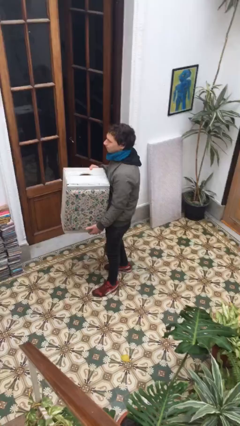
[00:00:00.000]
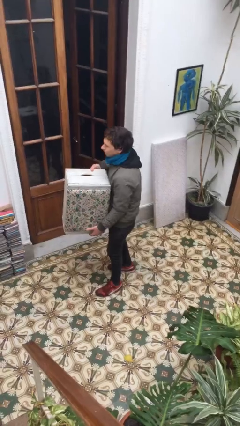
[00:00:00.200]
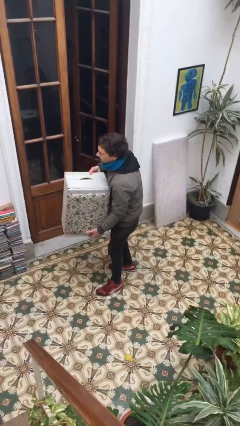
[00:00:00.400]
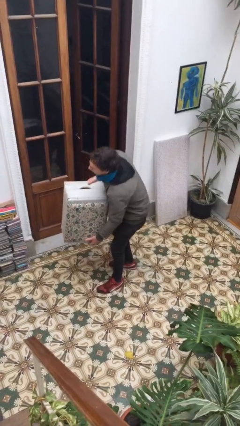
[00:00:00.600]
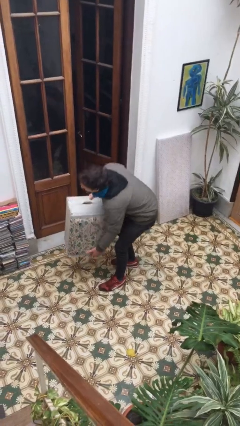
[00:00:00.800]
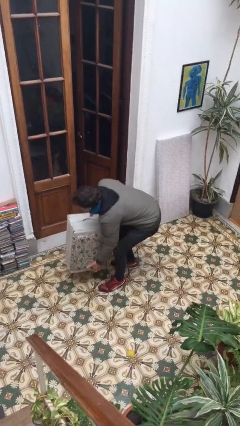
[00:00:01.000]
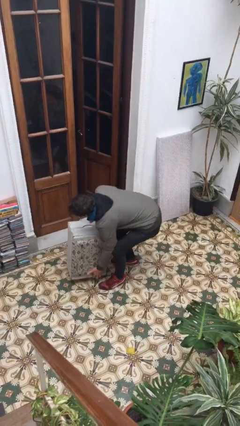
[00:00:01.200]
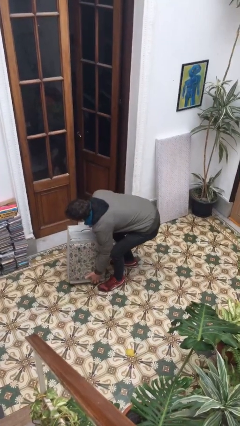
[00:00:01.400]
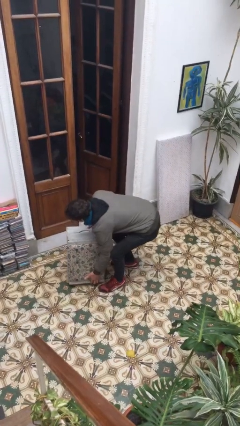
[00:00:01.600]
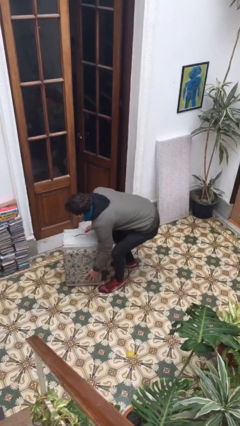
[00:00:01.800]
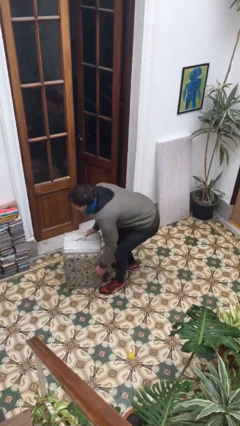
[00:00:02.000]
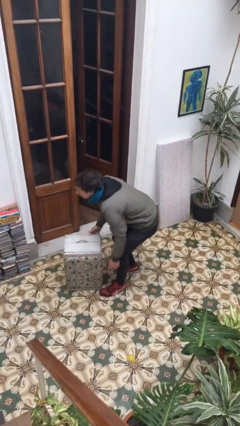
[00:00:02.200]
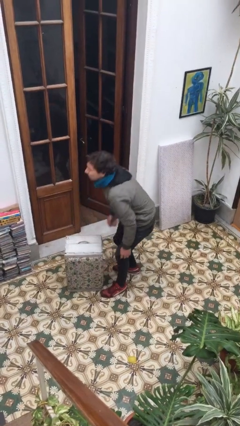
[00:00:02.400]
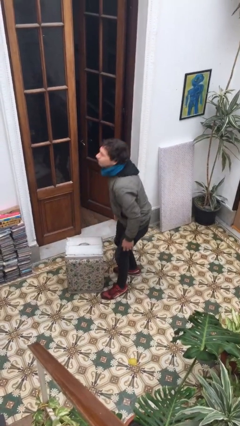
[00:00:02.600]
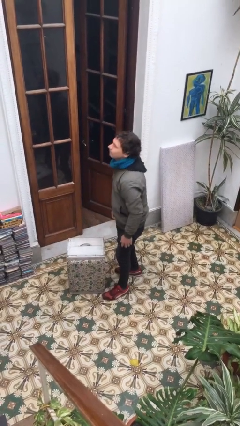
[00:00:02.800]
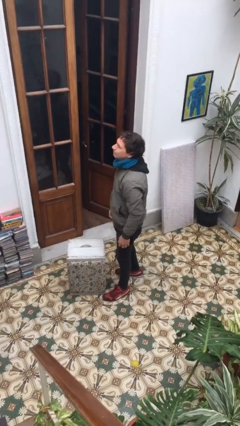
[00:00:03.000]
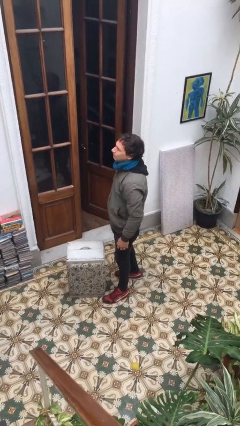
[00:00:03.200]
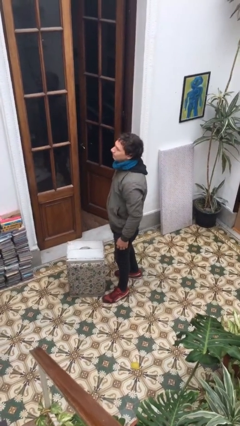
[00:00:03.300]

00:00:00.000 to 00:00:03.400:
person puts down object on floor

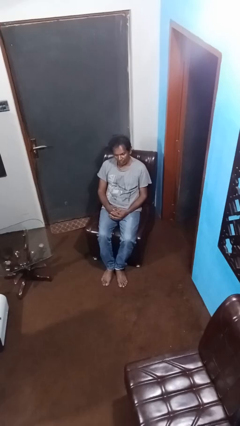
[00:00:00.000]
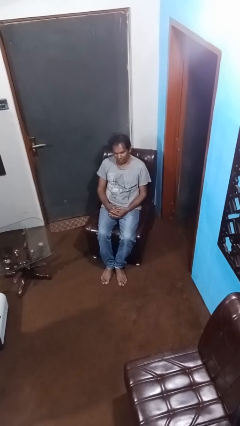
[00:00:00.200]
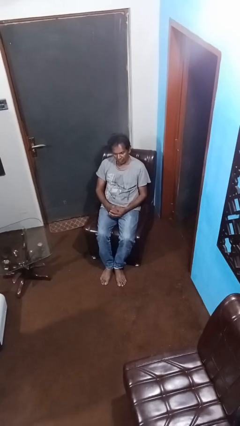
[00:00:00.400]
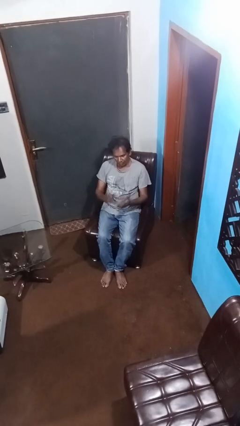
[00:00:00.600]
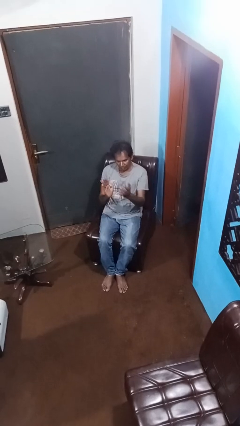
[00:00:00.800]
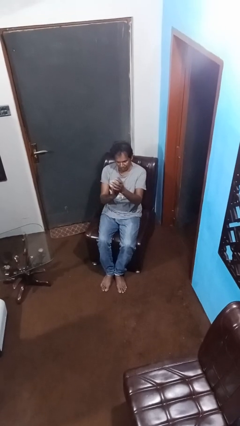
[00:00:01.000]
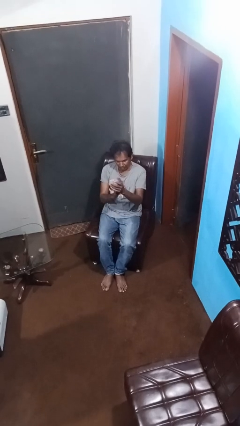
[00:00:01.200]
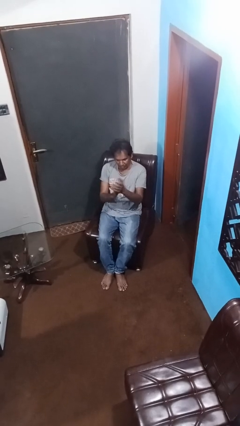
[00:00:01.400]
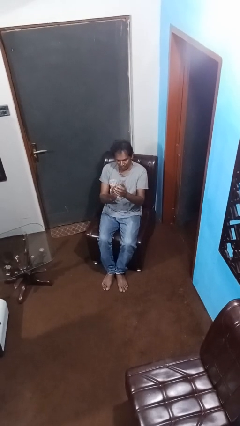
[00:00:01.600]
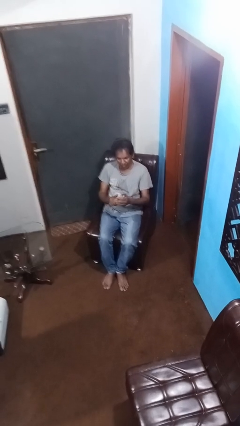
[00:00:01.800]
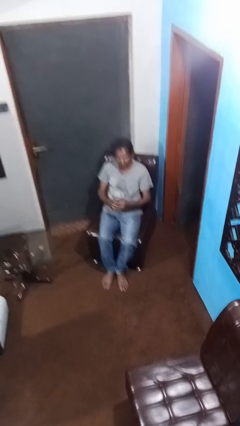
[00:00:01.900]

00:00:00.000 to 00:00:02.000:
person claps hands

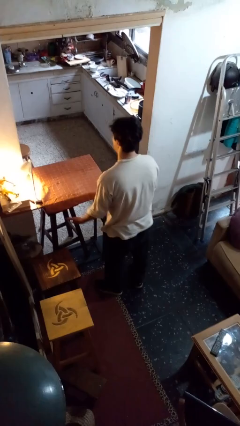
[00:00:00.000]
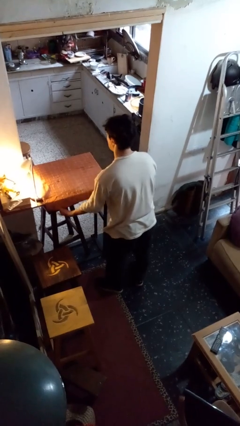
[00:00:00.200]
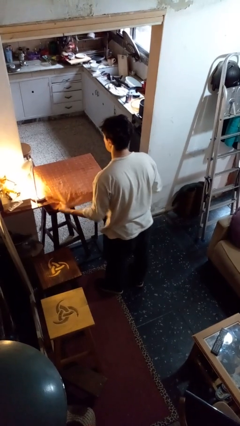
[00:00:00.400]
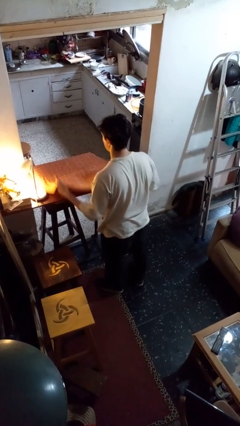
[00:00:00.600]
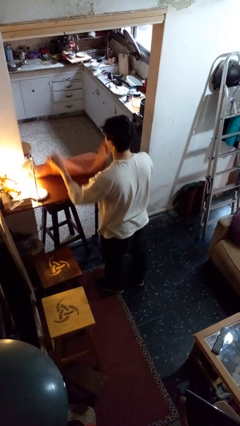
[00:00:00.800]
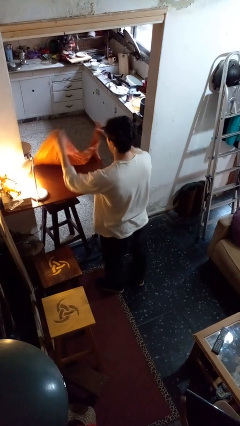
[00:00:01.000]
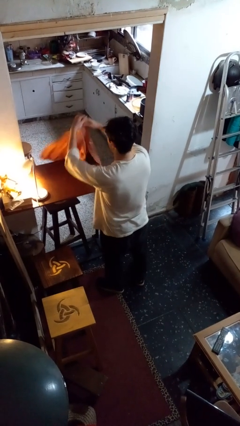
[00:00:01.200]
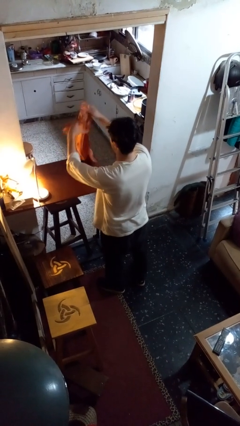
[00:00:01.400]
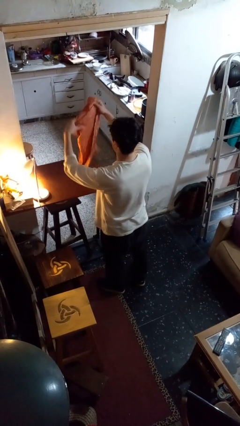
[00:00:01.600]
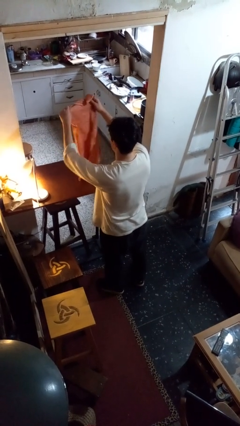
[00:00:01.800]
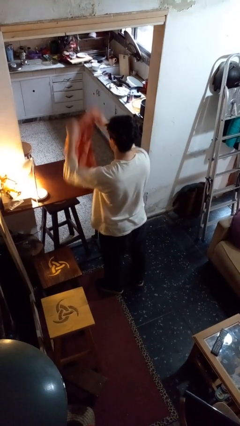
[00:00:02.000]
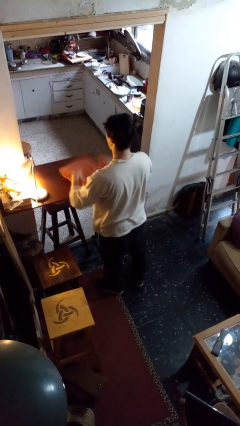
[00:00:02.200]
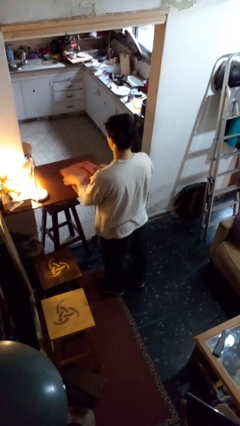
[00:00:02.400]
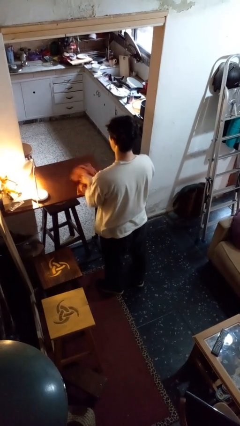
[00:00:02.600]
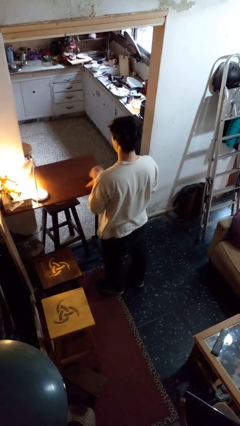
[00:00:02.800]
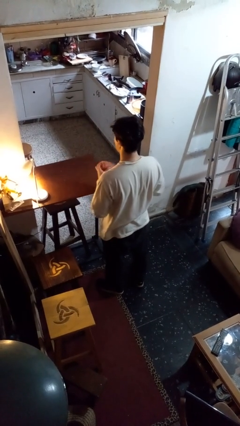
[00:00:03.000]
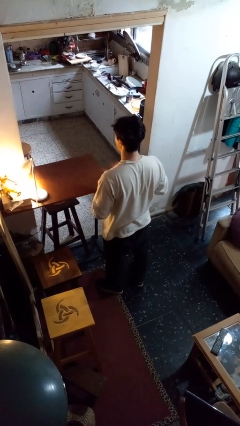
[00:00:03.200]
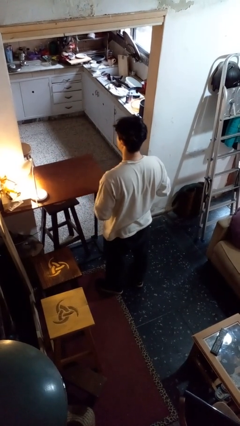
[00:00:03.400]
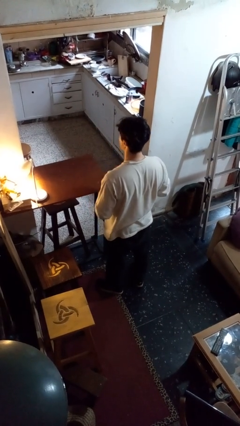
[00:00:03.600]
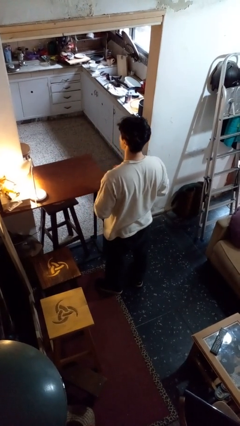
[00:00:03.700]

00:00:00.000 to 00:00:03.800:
person folds tablecloth

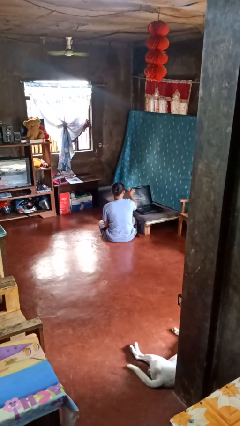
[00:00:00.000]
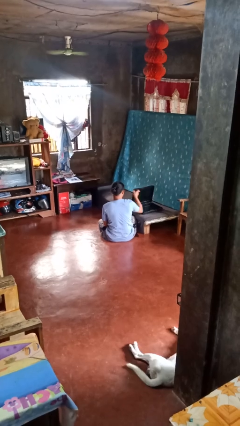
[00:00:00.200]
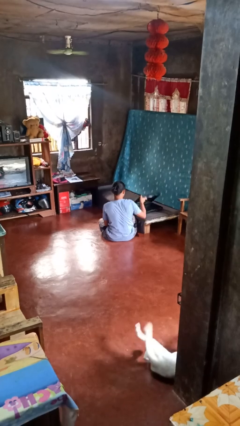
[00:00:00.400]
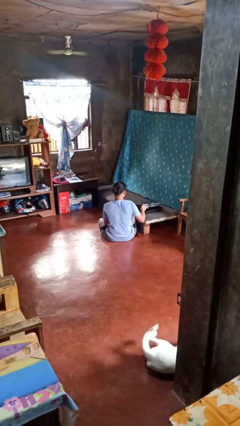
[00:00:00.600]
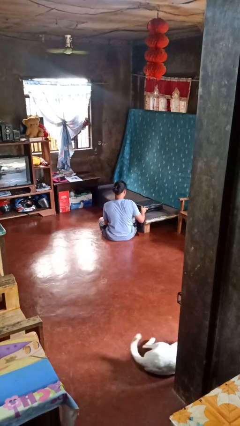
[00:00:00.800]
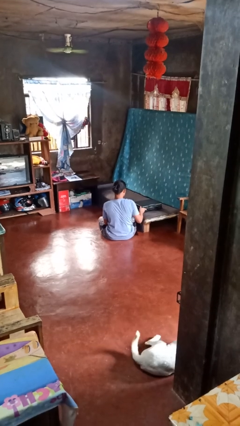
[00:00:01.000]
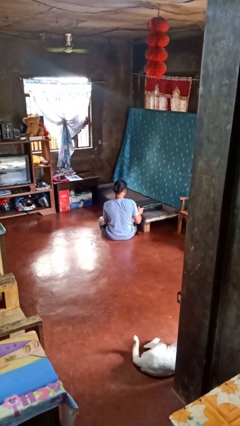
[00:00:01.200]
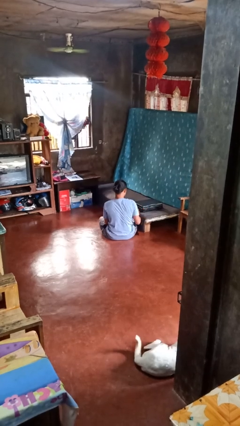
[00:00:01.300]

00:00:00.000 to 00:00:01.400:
person closes suitcase

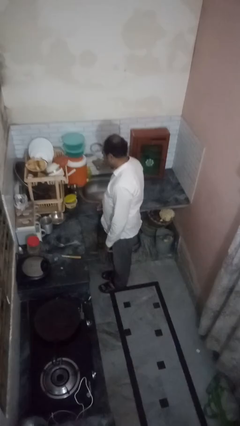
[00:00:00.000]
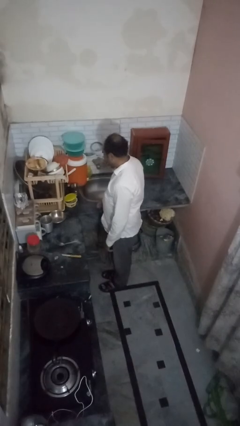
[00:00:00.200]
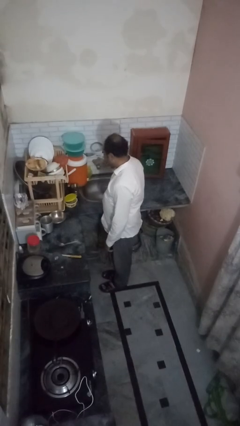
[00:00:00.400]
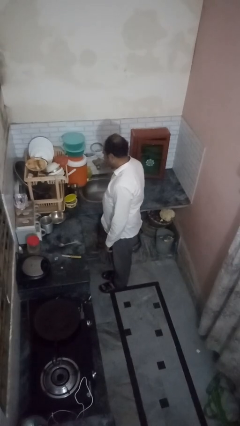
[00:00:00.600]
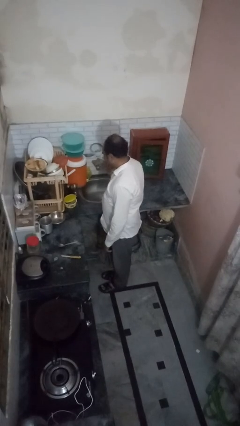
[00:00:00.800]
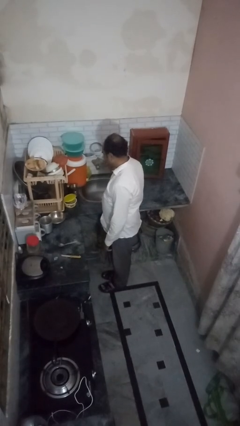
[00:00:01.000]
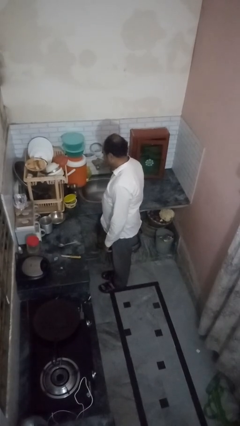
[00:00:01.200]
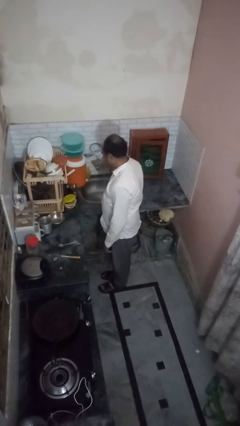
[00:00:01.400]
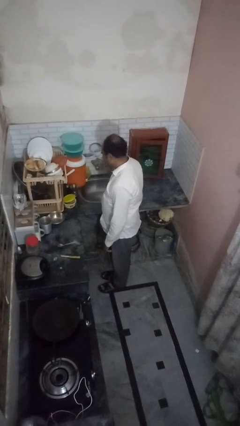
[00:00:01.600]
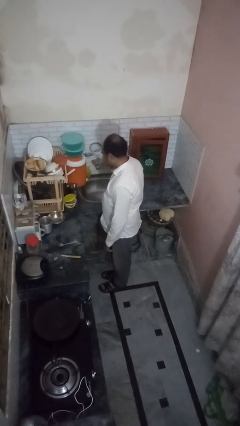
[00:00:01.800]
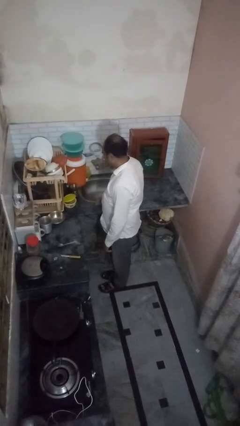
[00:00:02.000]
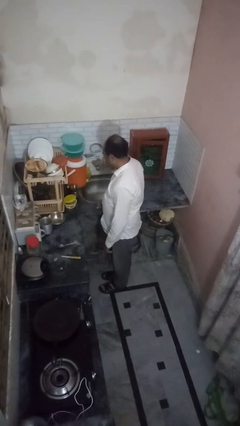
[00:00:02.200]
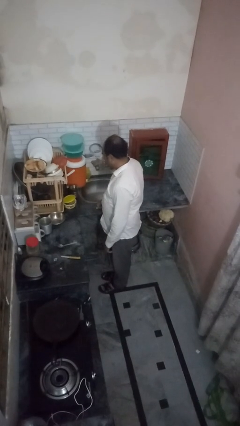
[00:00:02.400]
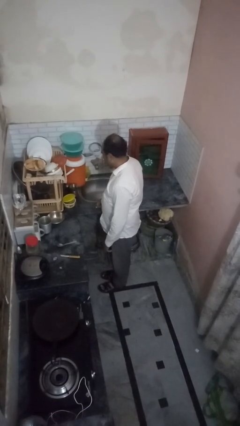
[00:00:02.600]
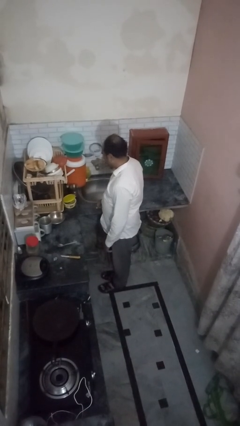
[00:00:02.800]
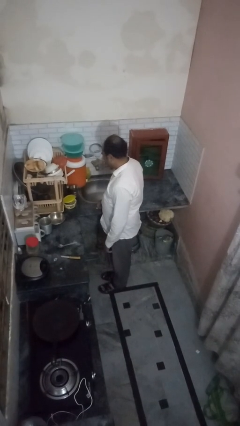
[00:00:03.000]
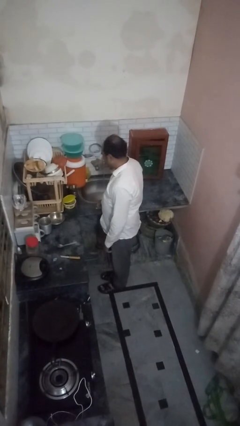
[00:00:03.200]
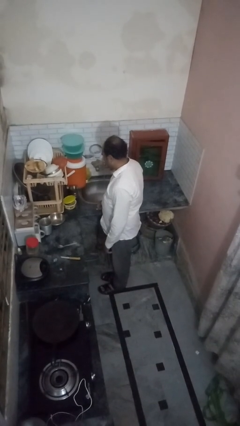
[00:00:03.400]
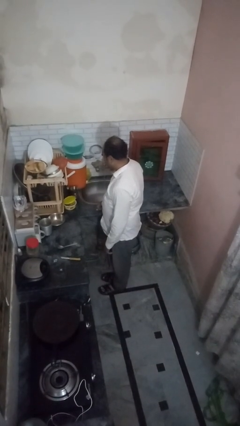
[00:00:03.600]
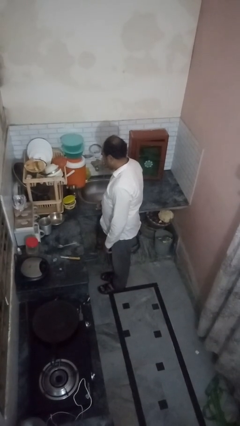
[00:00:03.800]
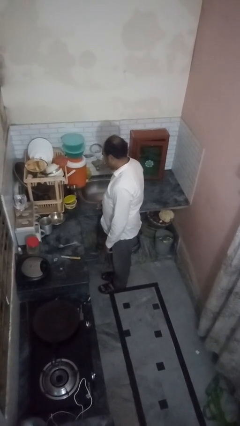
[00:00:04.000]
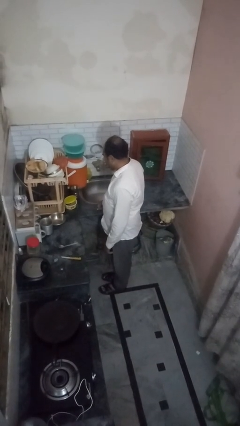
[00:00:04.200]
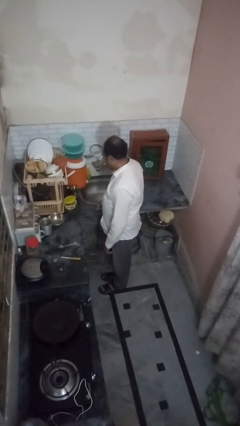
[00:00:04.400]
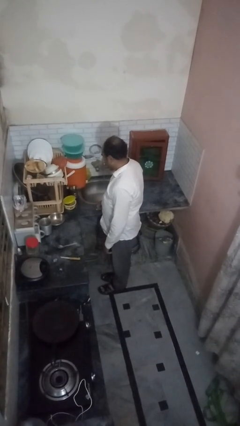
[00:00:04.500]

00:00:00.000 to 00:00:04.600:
person turns on faucet

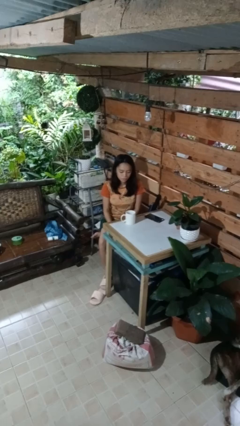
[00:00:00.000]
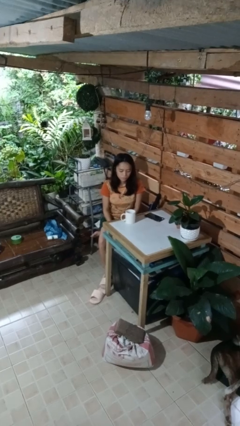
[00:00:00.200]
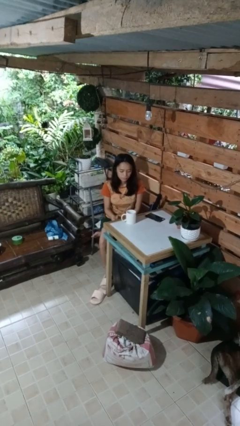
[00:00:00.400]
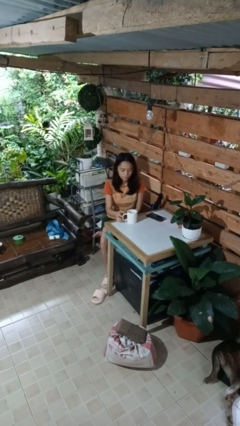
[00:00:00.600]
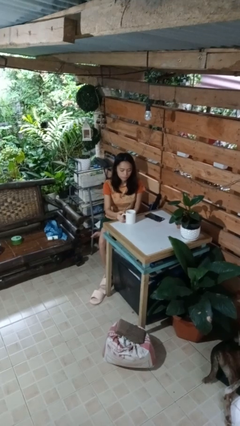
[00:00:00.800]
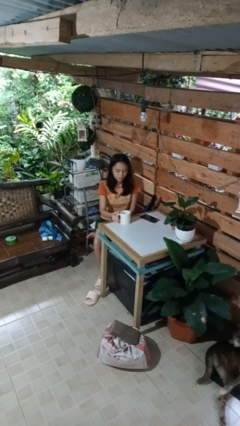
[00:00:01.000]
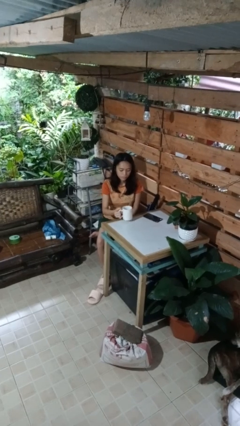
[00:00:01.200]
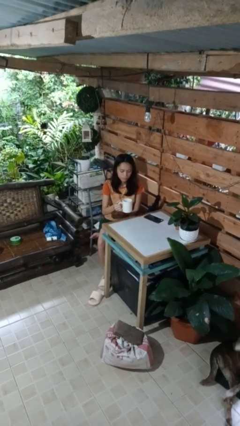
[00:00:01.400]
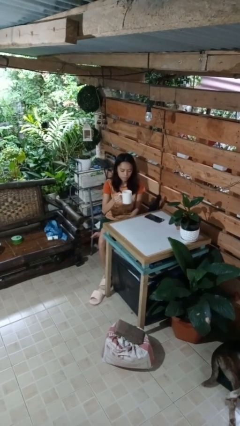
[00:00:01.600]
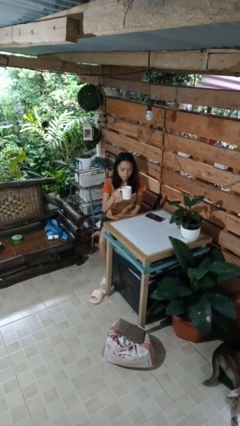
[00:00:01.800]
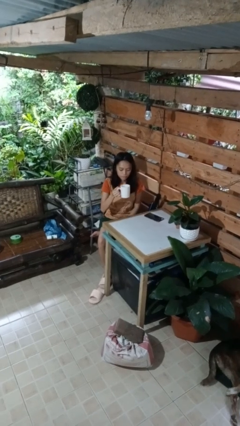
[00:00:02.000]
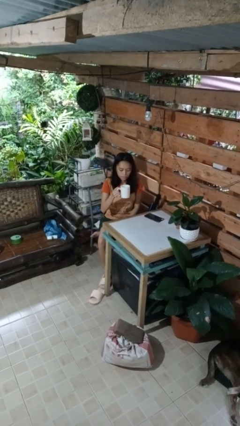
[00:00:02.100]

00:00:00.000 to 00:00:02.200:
person picks up object from table
